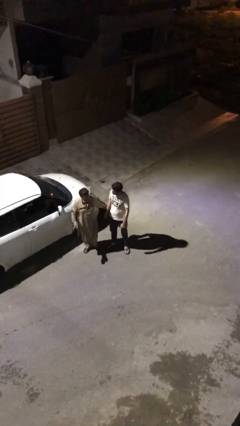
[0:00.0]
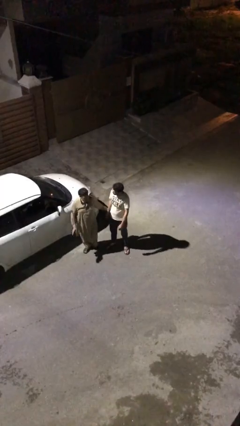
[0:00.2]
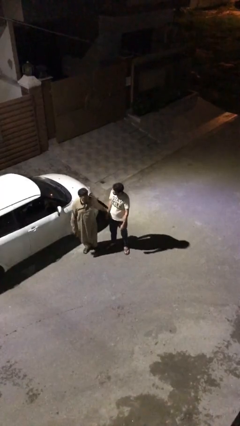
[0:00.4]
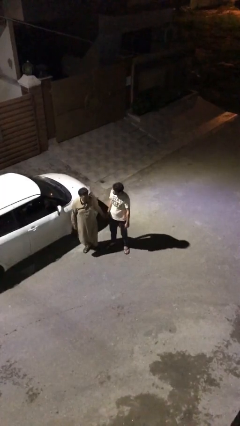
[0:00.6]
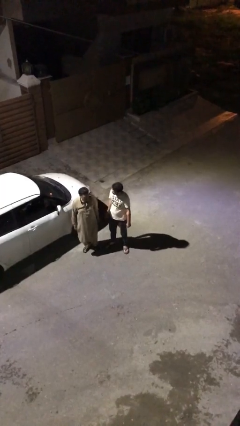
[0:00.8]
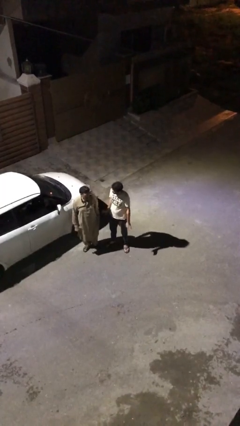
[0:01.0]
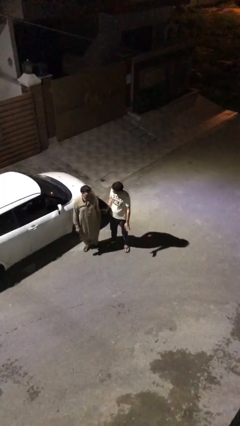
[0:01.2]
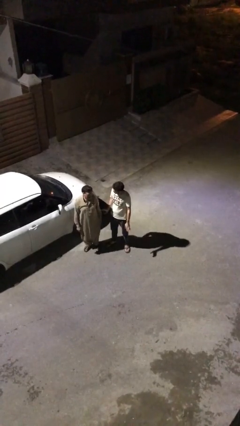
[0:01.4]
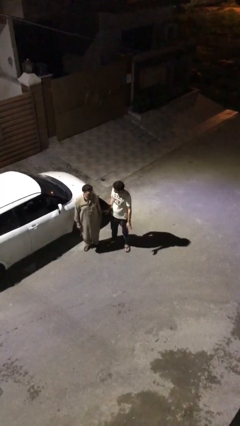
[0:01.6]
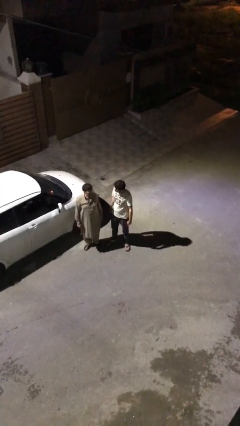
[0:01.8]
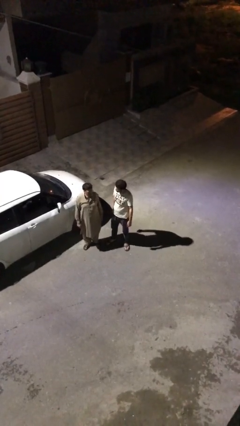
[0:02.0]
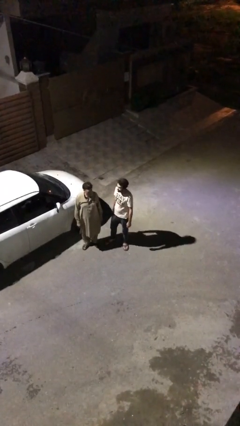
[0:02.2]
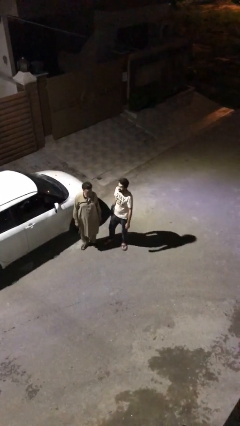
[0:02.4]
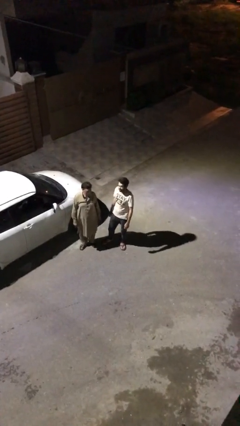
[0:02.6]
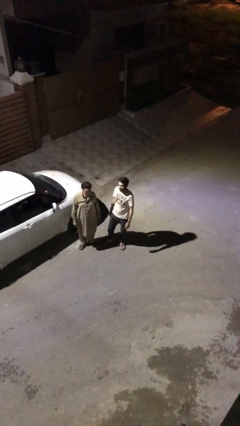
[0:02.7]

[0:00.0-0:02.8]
person talks to person

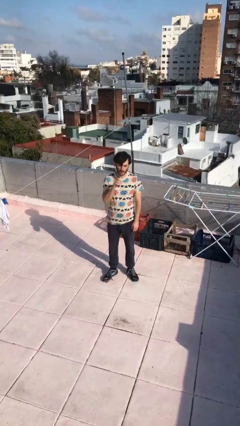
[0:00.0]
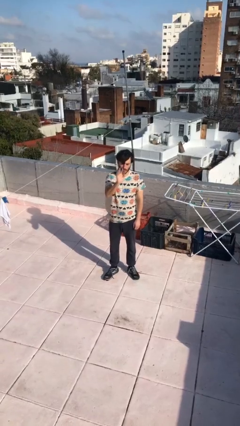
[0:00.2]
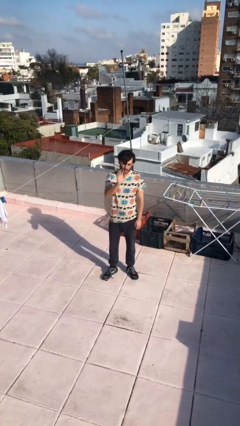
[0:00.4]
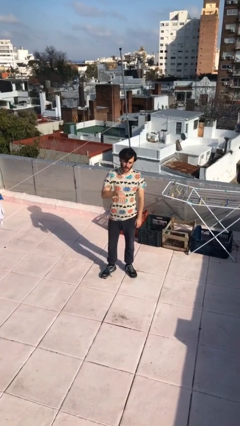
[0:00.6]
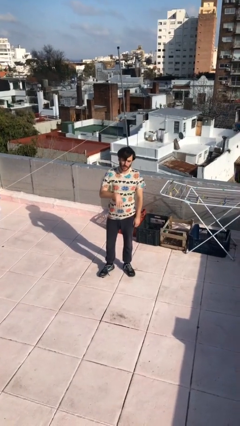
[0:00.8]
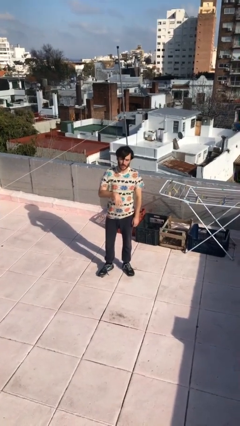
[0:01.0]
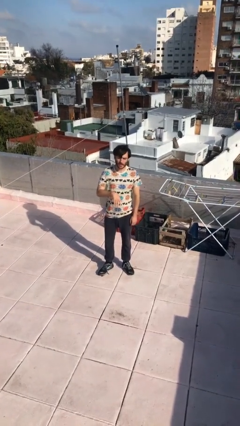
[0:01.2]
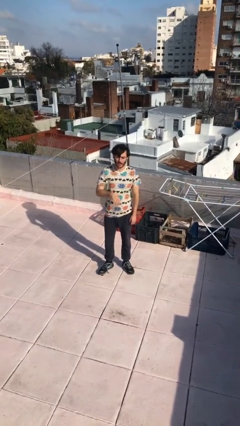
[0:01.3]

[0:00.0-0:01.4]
person gestures swipe down

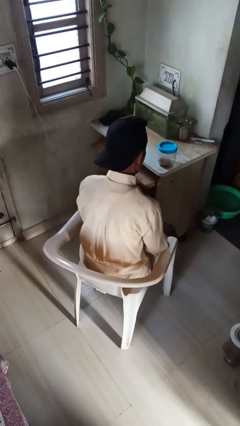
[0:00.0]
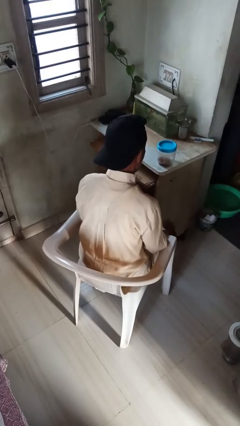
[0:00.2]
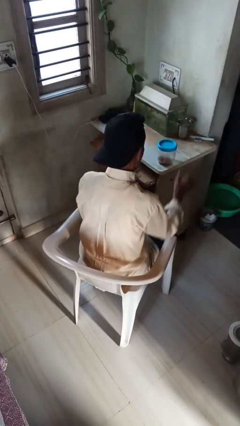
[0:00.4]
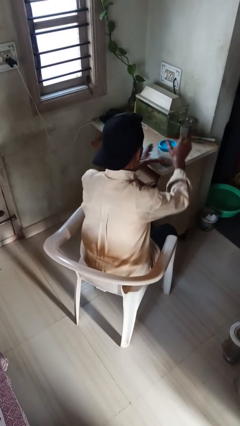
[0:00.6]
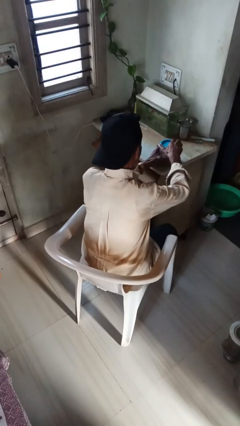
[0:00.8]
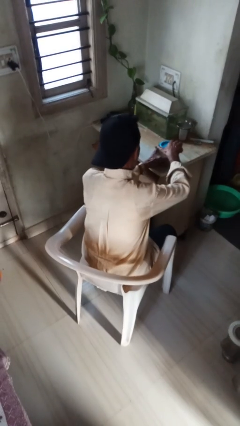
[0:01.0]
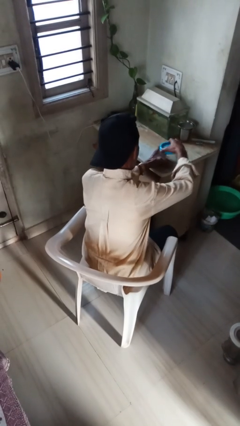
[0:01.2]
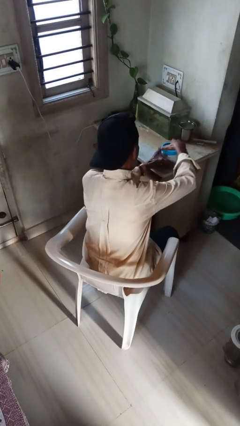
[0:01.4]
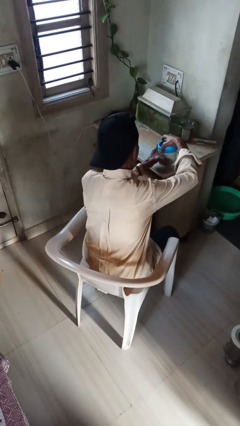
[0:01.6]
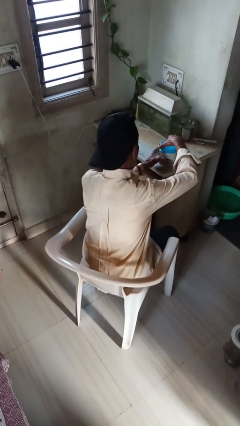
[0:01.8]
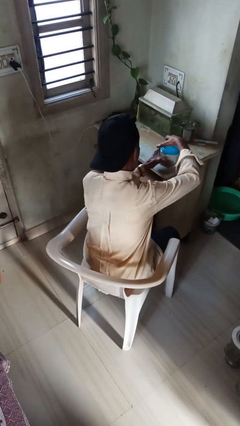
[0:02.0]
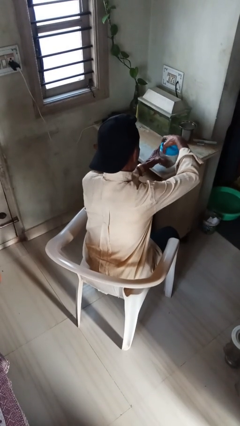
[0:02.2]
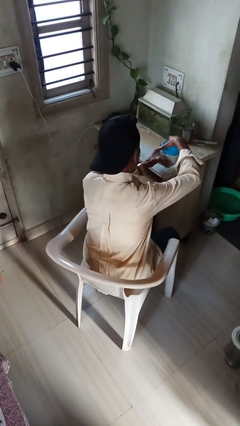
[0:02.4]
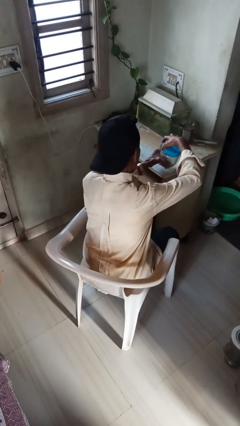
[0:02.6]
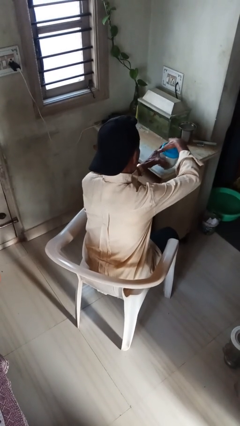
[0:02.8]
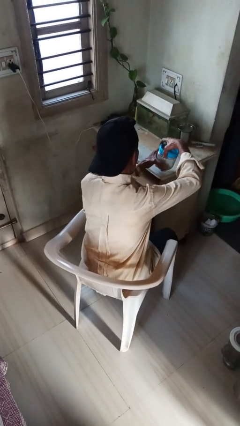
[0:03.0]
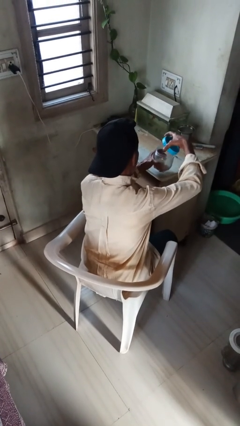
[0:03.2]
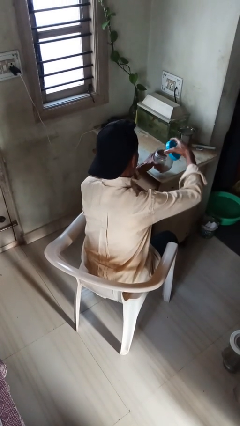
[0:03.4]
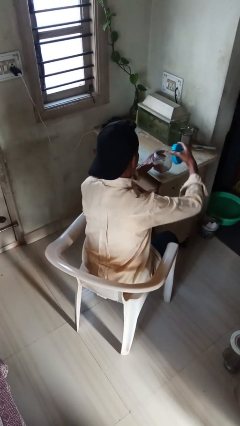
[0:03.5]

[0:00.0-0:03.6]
person opens jar

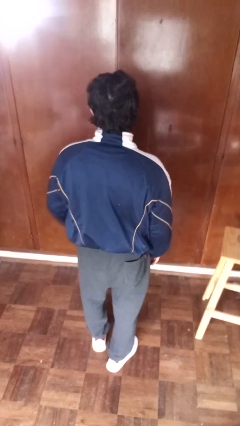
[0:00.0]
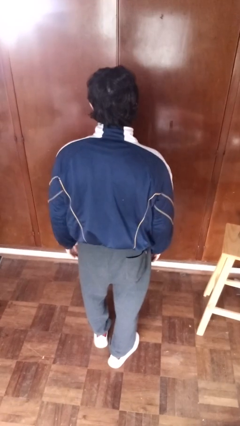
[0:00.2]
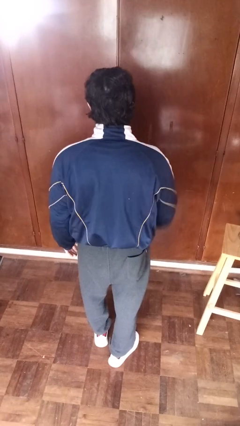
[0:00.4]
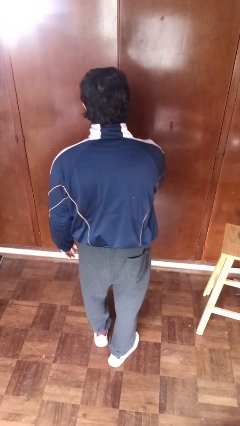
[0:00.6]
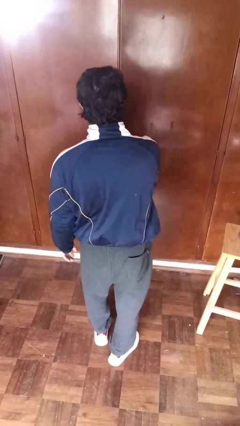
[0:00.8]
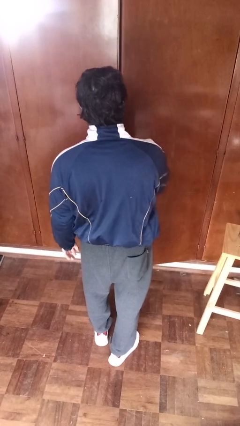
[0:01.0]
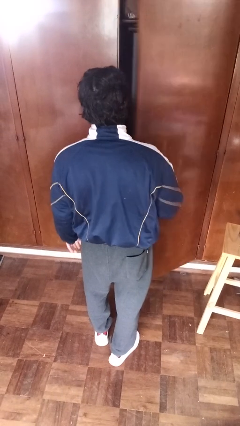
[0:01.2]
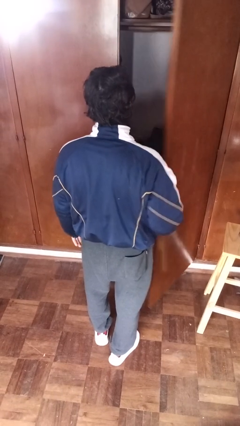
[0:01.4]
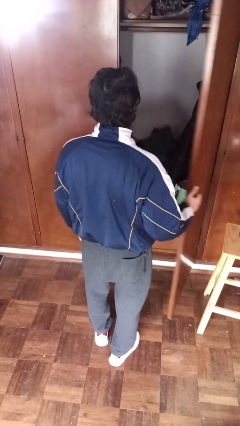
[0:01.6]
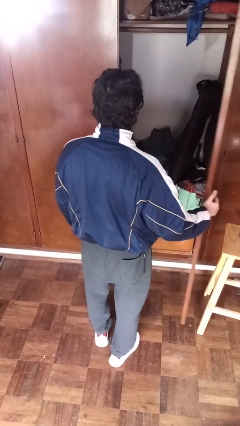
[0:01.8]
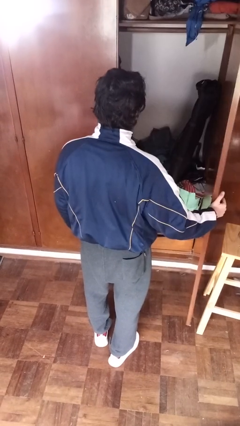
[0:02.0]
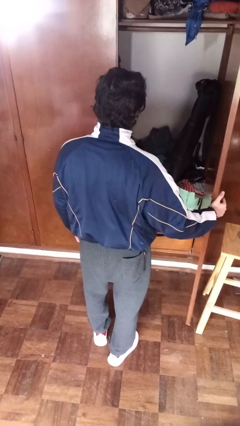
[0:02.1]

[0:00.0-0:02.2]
person opens closet door

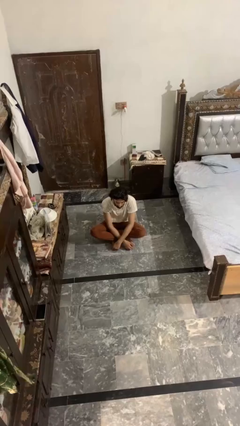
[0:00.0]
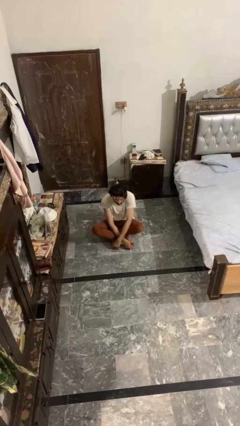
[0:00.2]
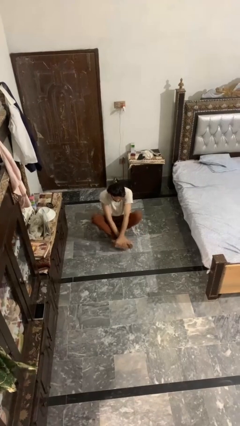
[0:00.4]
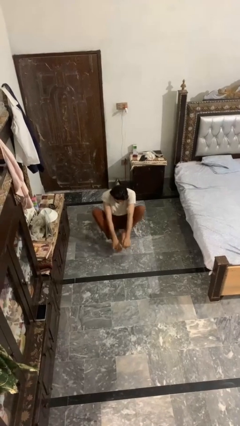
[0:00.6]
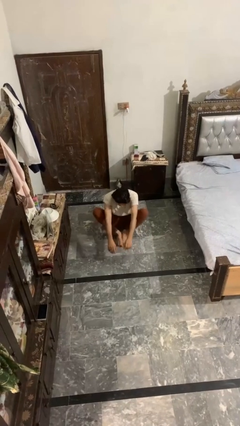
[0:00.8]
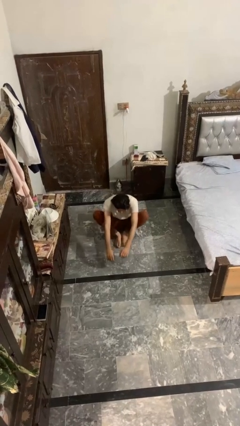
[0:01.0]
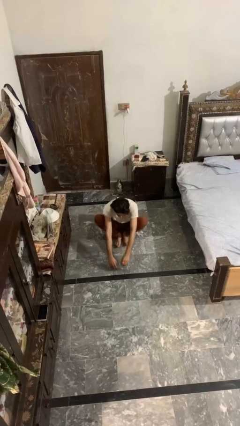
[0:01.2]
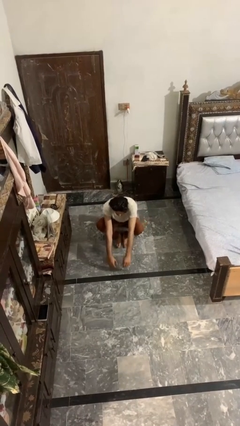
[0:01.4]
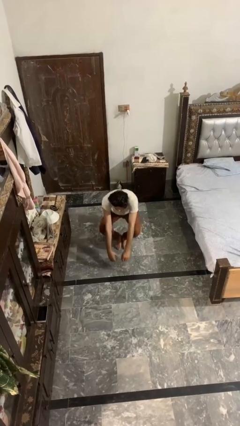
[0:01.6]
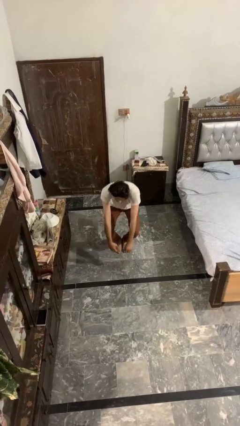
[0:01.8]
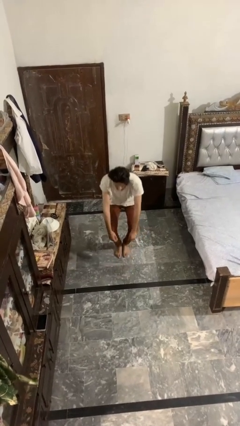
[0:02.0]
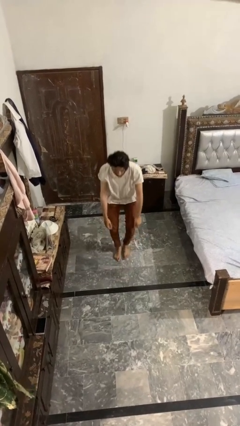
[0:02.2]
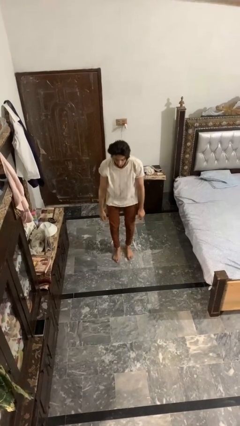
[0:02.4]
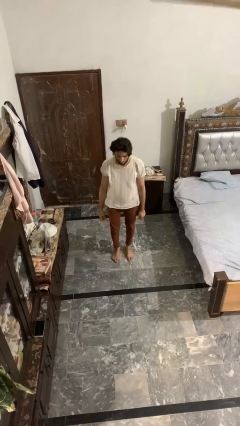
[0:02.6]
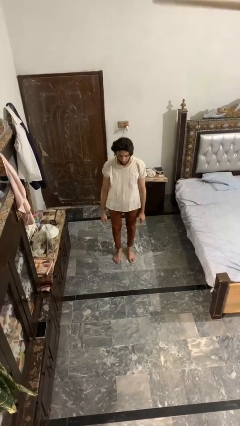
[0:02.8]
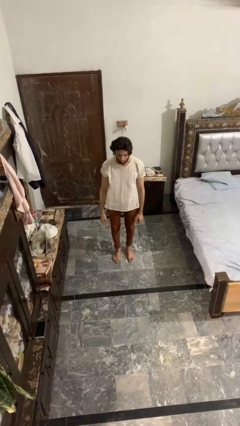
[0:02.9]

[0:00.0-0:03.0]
person stands up from floor

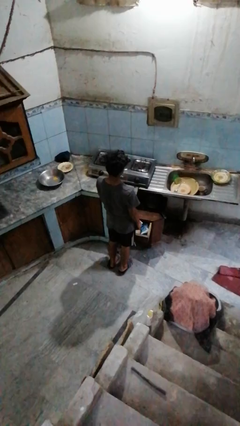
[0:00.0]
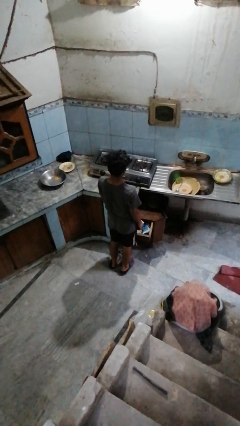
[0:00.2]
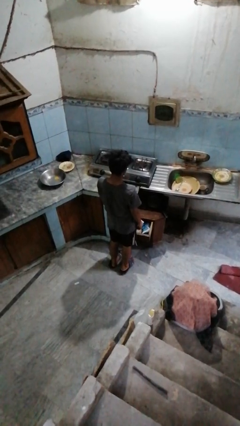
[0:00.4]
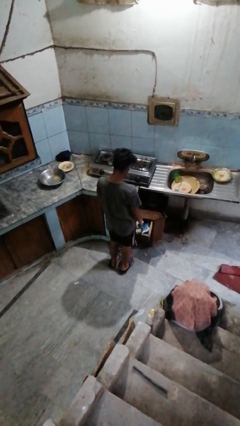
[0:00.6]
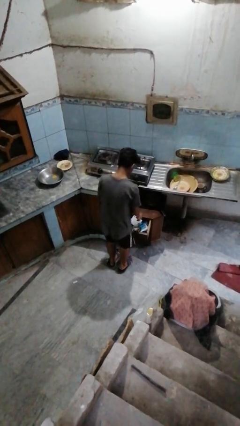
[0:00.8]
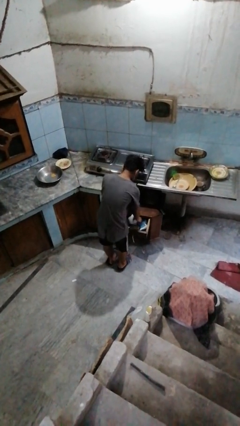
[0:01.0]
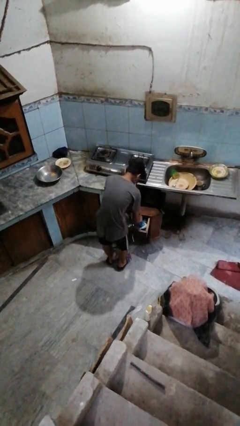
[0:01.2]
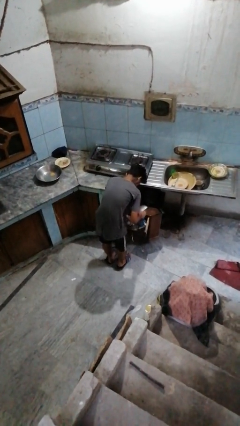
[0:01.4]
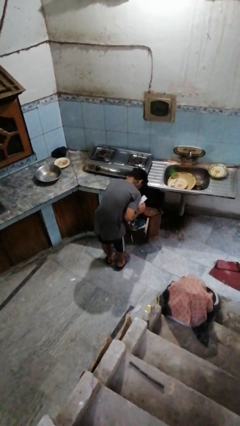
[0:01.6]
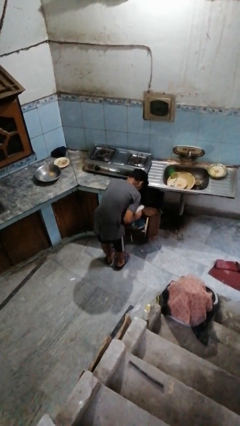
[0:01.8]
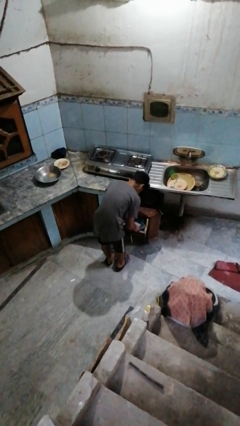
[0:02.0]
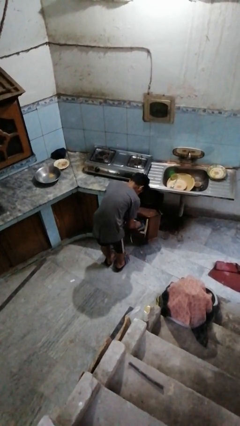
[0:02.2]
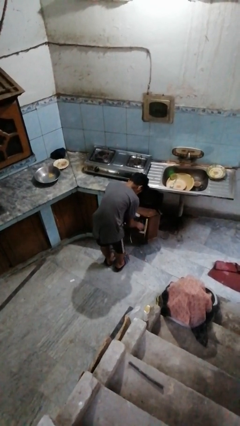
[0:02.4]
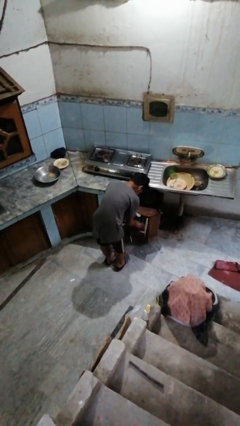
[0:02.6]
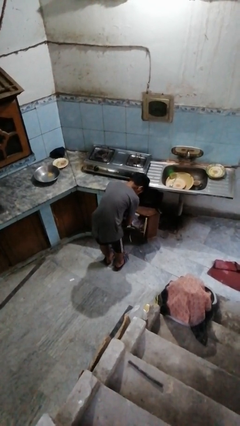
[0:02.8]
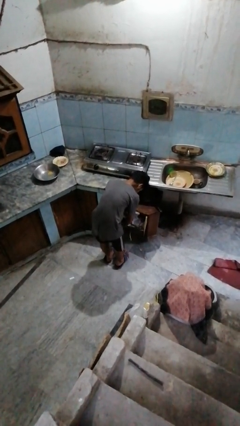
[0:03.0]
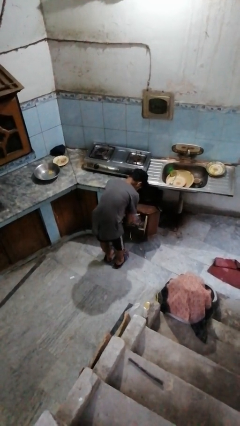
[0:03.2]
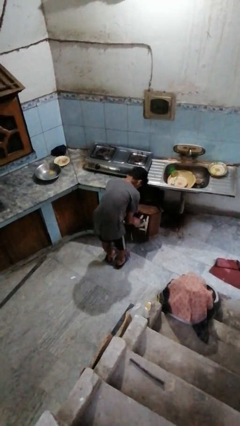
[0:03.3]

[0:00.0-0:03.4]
person searches in kitchen drawer

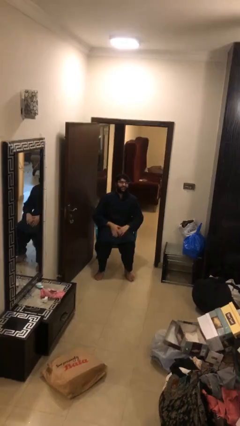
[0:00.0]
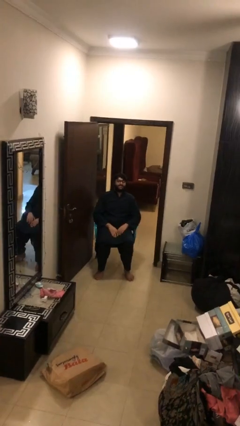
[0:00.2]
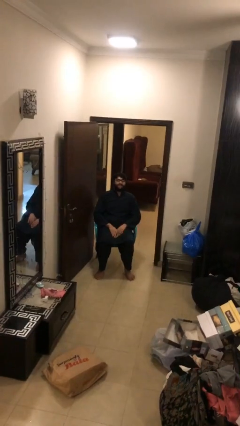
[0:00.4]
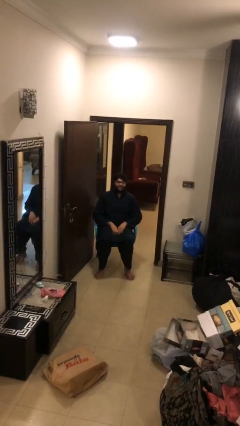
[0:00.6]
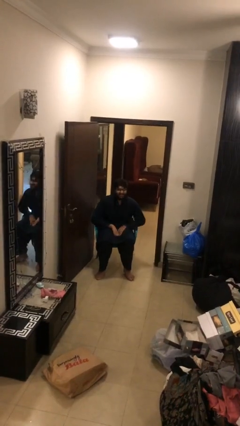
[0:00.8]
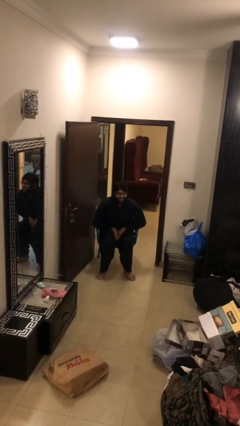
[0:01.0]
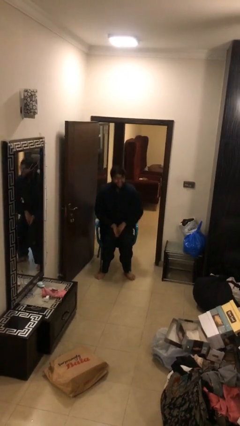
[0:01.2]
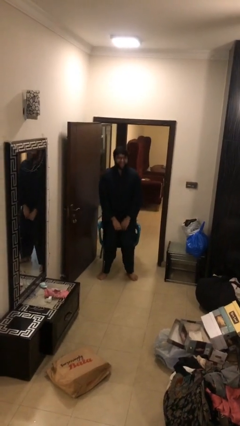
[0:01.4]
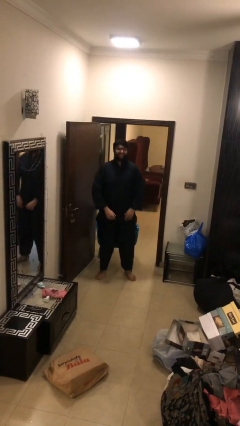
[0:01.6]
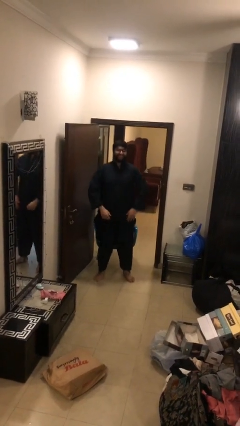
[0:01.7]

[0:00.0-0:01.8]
person stands up
